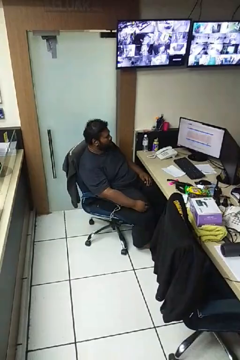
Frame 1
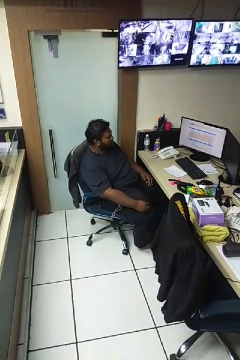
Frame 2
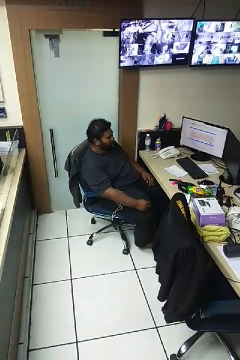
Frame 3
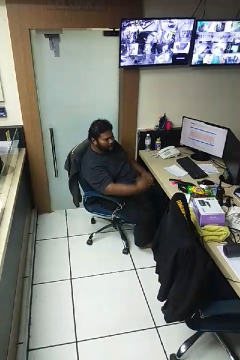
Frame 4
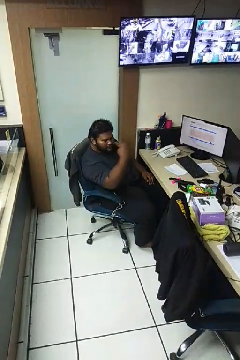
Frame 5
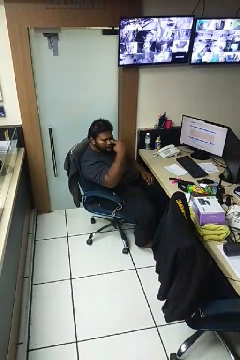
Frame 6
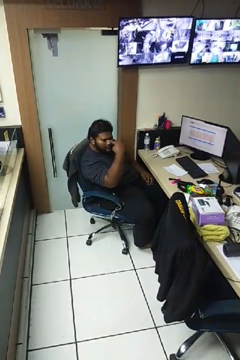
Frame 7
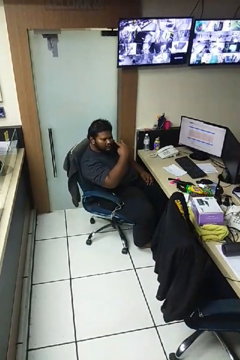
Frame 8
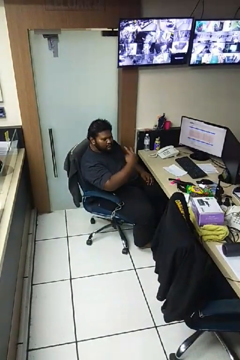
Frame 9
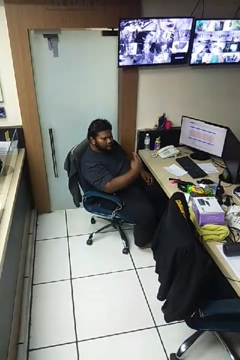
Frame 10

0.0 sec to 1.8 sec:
person gestures watch closely

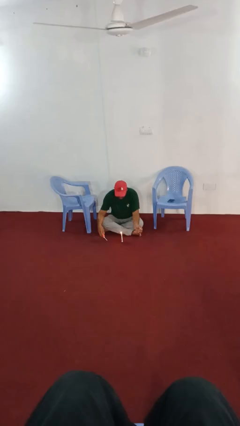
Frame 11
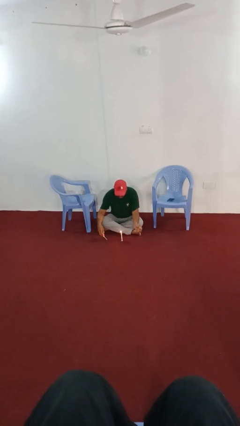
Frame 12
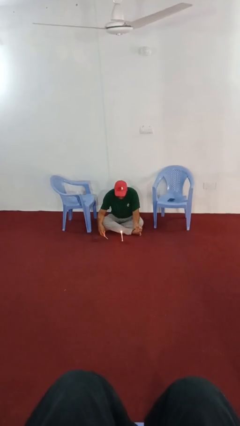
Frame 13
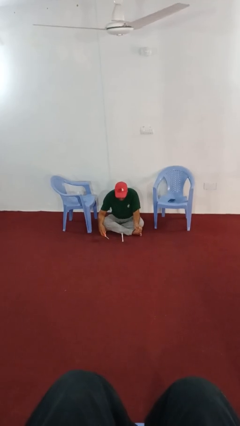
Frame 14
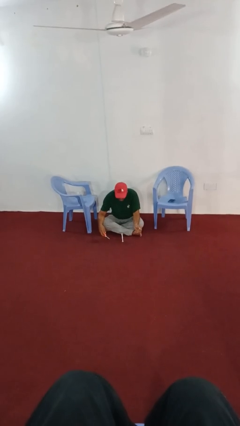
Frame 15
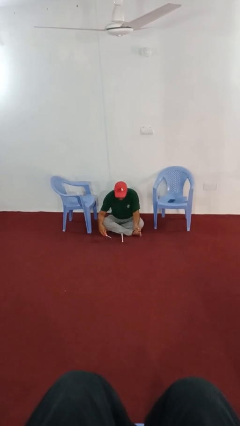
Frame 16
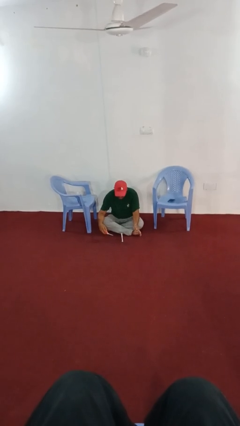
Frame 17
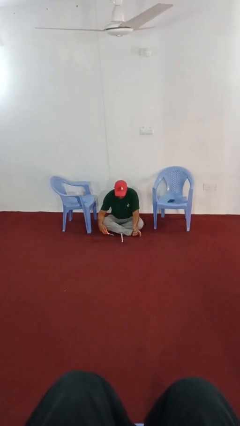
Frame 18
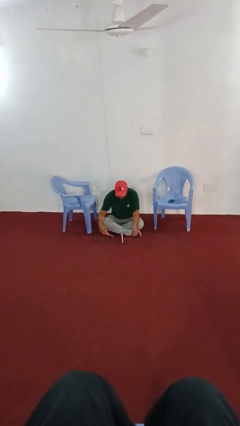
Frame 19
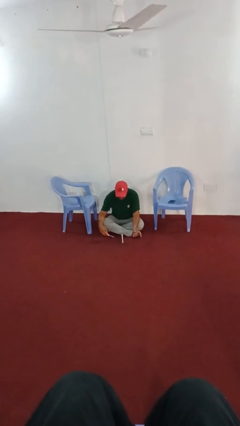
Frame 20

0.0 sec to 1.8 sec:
person extinguishes candle

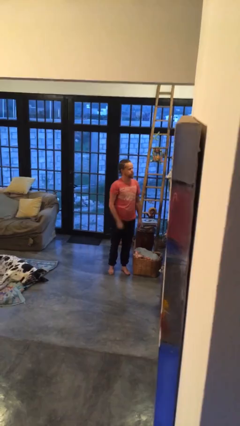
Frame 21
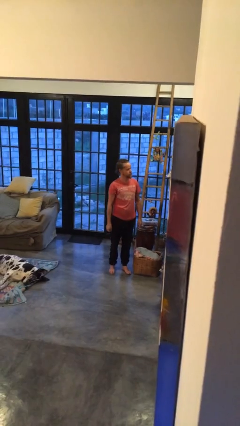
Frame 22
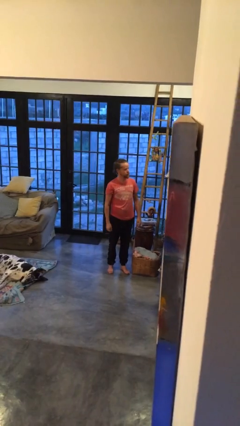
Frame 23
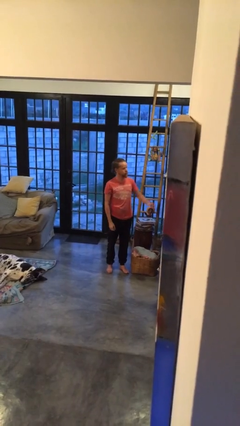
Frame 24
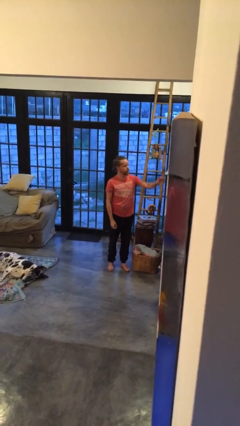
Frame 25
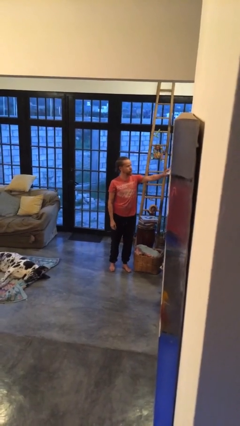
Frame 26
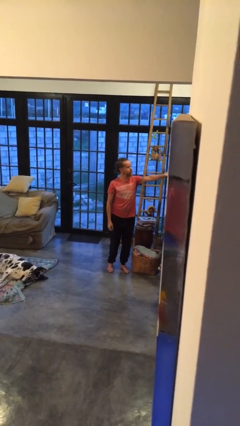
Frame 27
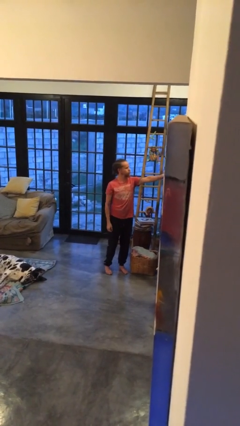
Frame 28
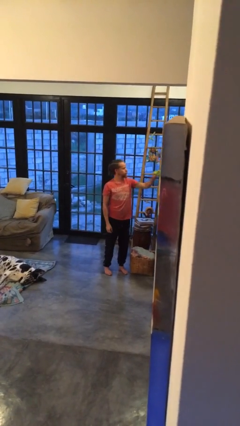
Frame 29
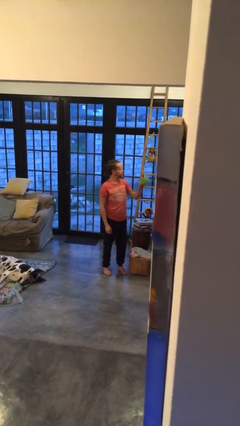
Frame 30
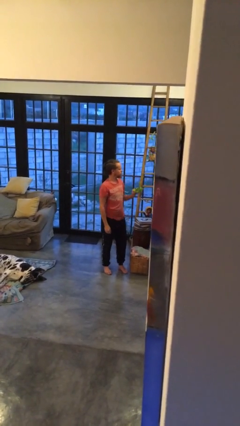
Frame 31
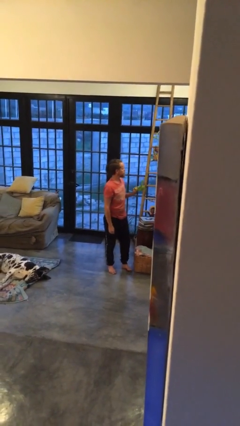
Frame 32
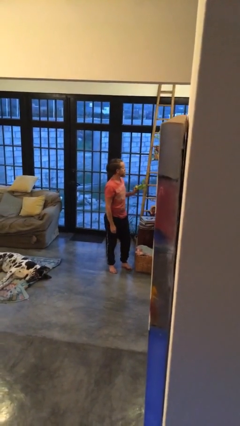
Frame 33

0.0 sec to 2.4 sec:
person picks up object from countertop

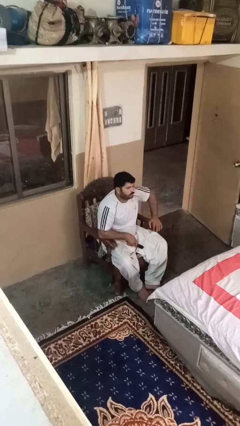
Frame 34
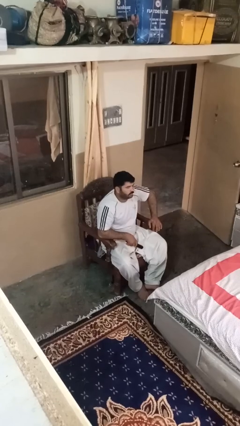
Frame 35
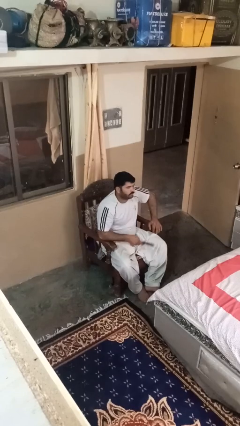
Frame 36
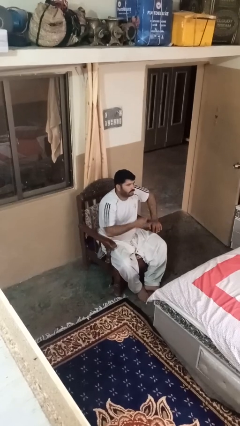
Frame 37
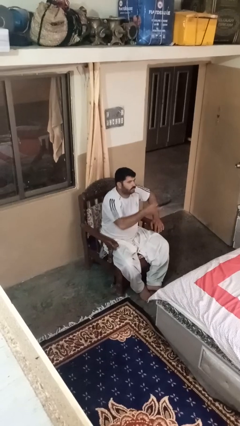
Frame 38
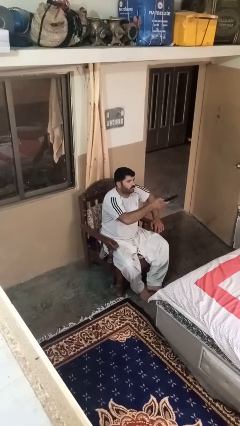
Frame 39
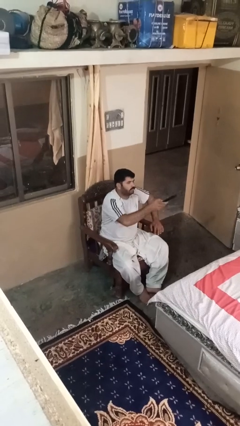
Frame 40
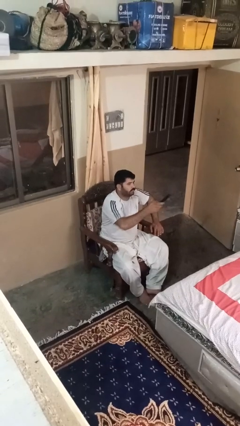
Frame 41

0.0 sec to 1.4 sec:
person uses television remote

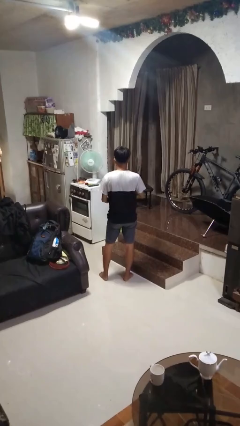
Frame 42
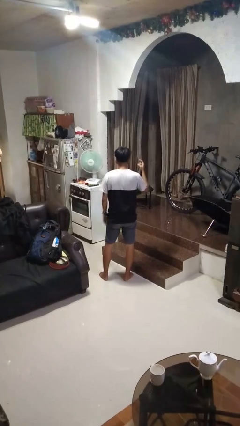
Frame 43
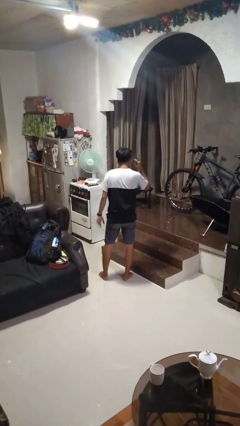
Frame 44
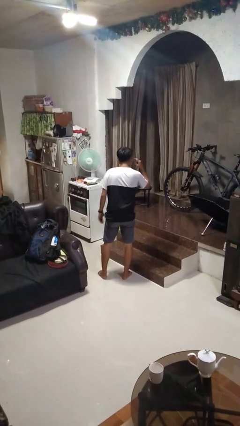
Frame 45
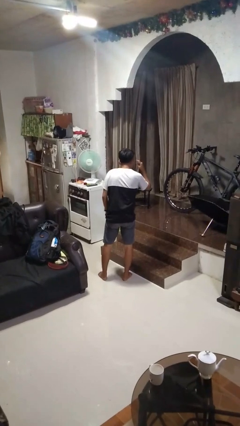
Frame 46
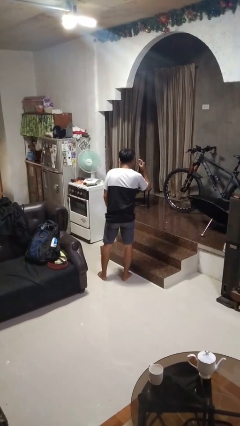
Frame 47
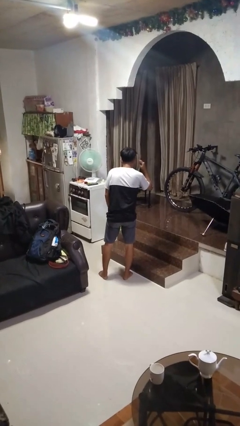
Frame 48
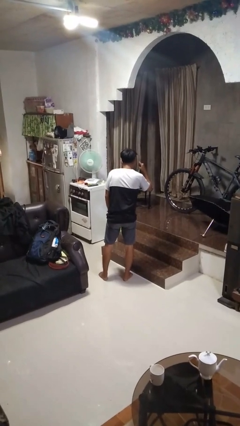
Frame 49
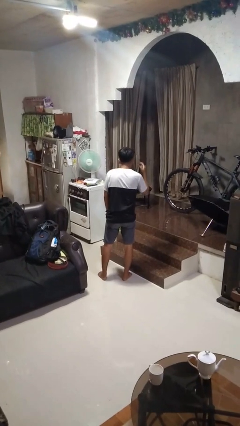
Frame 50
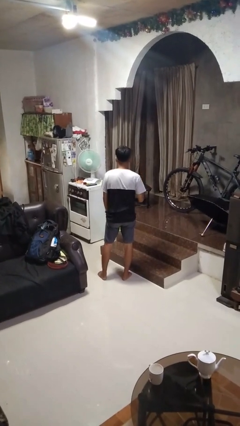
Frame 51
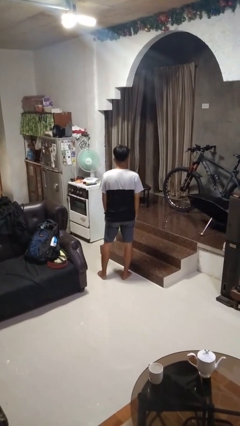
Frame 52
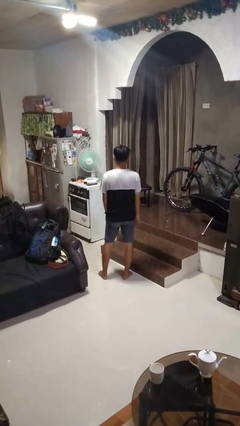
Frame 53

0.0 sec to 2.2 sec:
person gestures listen closely

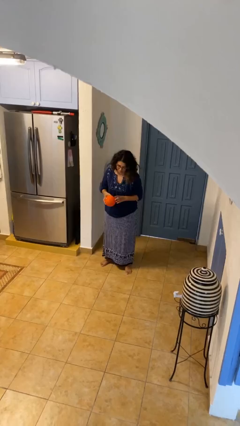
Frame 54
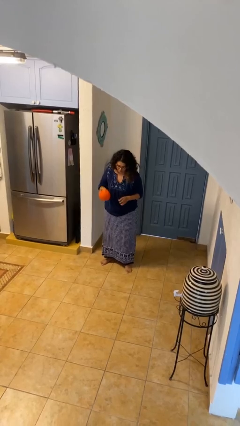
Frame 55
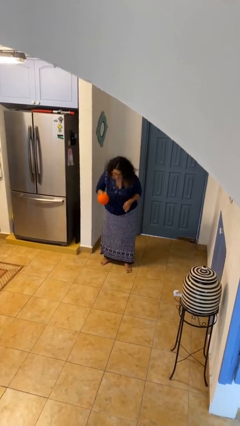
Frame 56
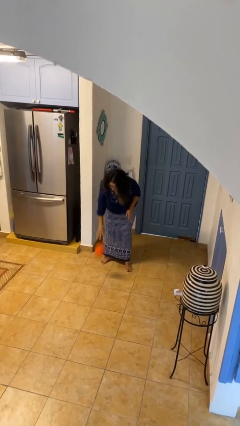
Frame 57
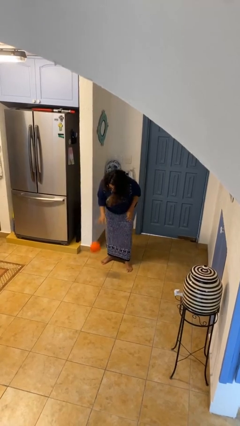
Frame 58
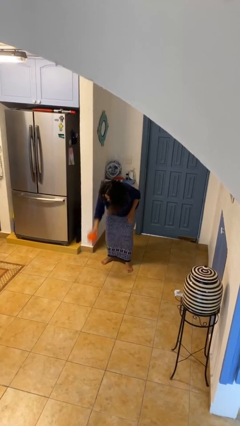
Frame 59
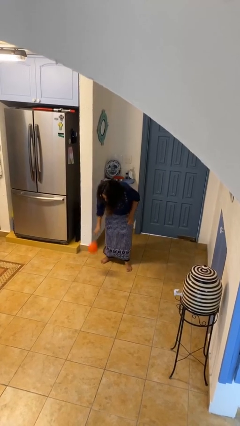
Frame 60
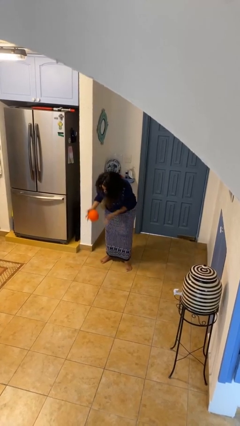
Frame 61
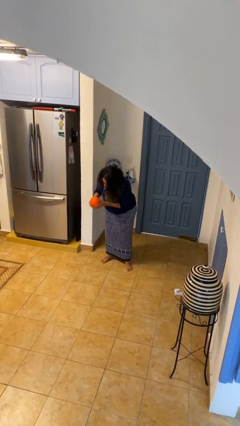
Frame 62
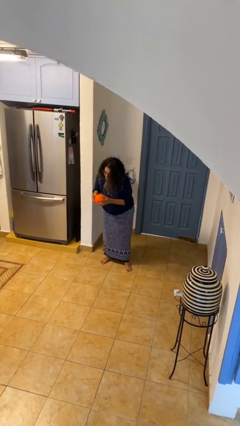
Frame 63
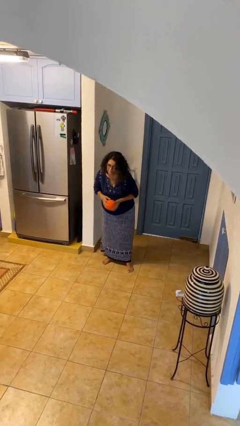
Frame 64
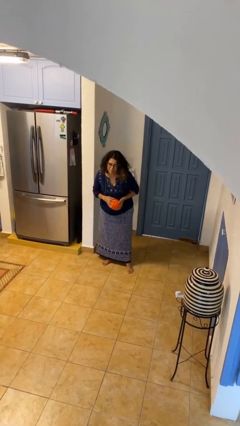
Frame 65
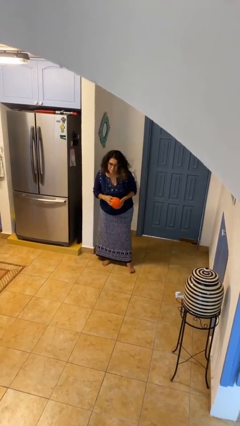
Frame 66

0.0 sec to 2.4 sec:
person bounces ball on floor

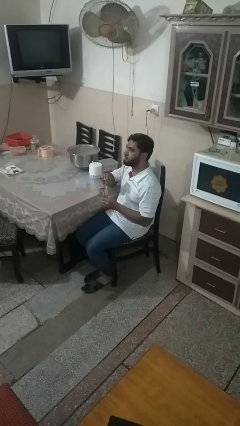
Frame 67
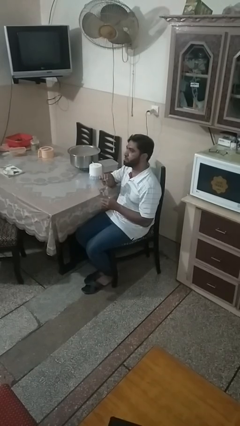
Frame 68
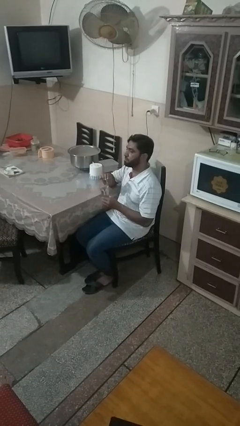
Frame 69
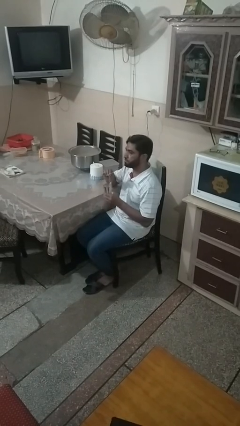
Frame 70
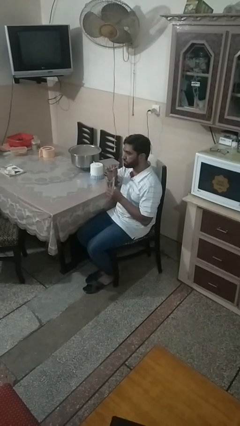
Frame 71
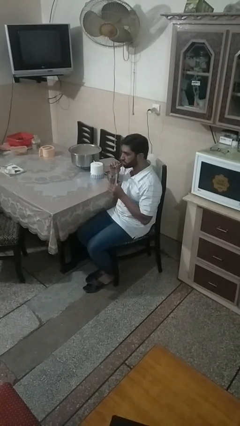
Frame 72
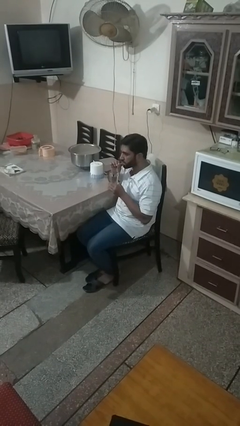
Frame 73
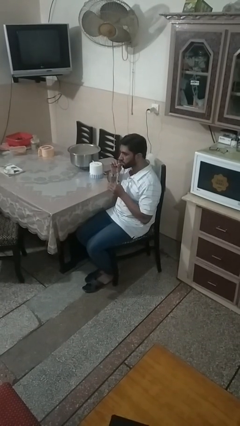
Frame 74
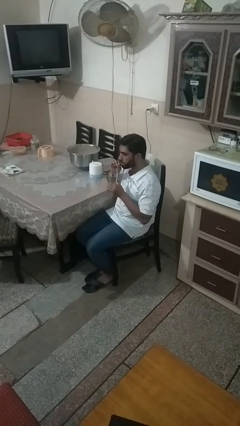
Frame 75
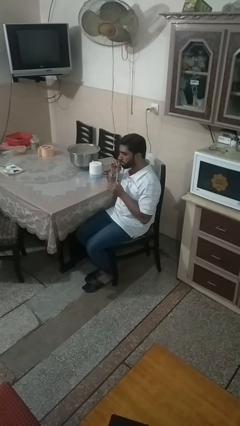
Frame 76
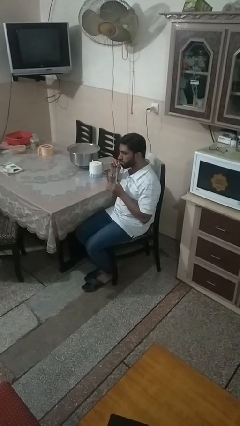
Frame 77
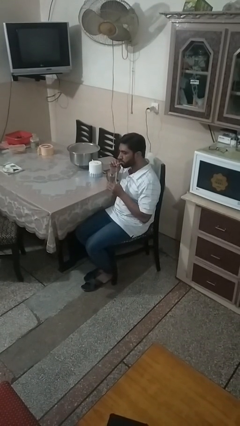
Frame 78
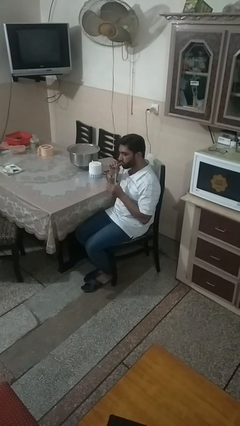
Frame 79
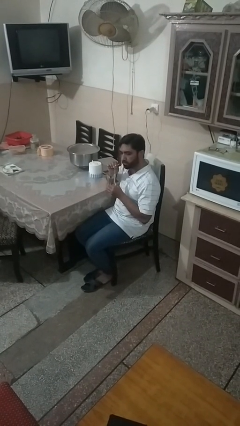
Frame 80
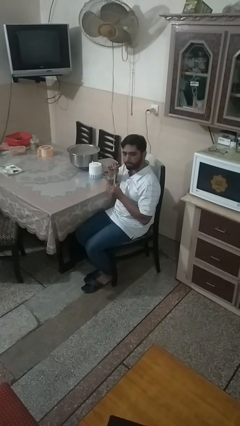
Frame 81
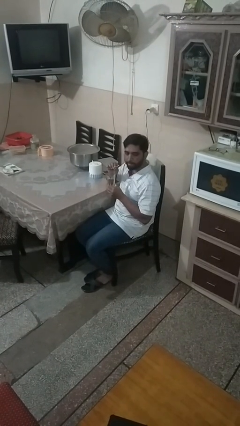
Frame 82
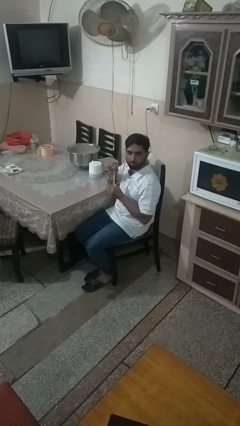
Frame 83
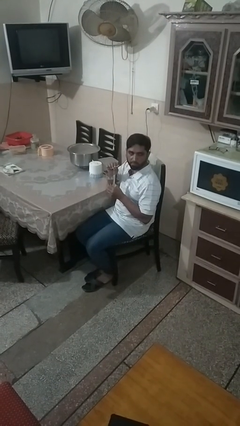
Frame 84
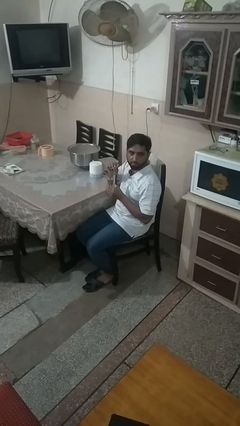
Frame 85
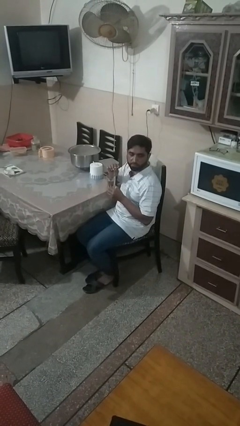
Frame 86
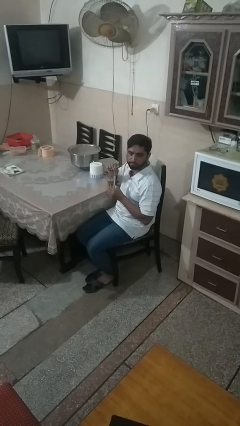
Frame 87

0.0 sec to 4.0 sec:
person drinks from straw

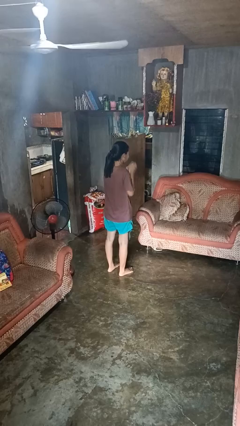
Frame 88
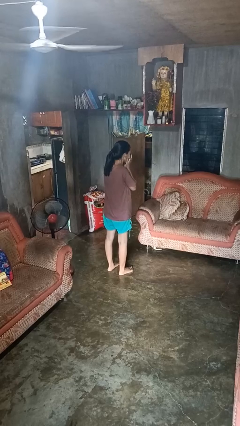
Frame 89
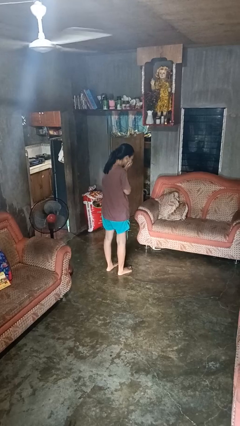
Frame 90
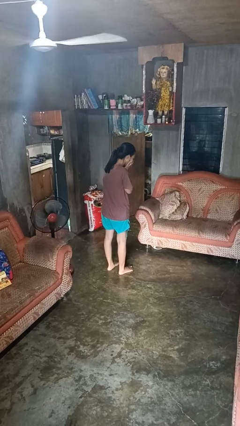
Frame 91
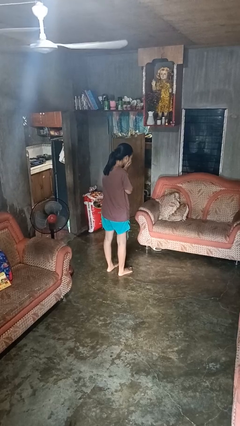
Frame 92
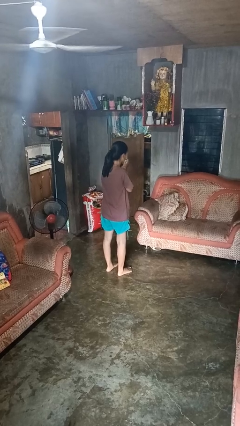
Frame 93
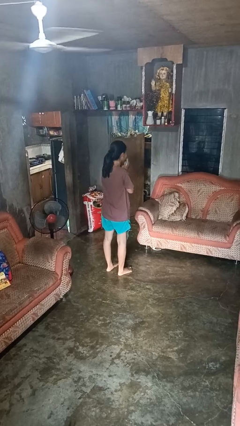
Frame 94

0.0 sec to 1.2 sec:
person sneezes into hand
